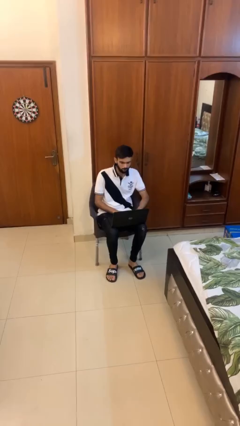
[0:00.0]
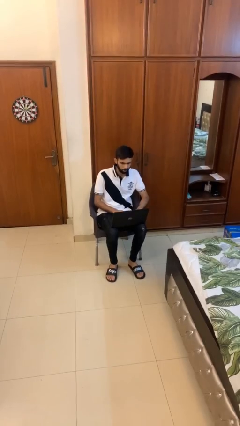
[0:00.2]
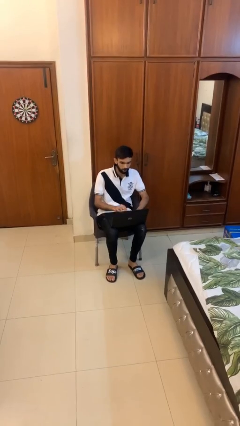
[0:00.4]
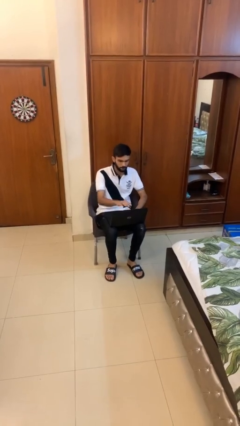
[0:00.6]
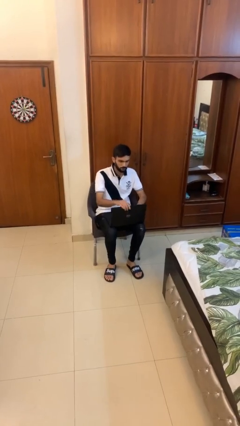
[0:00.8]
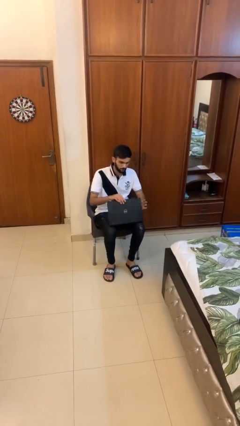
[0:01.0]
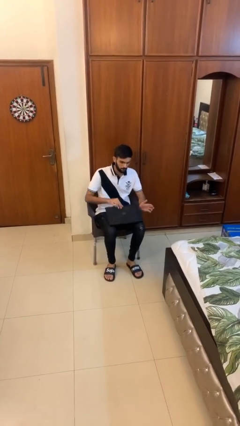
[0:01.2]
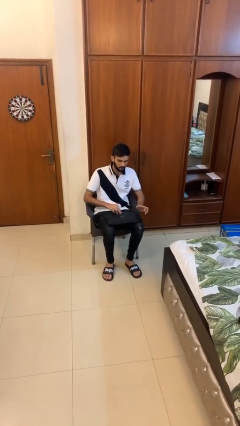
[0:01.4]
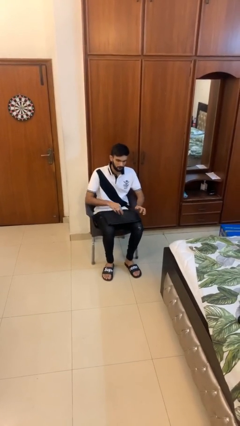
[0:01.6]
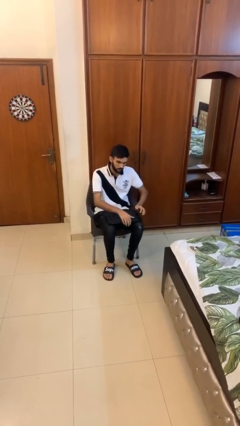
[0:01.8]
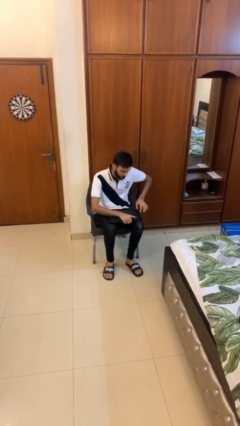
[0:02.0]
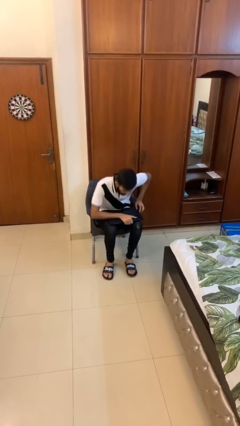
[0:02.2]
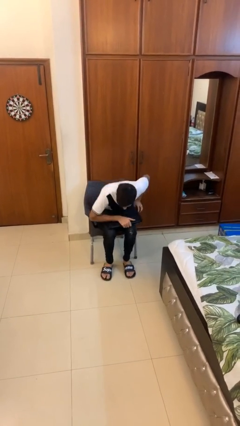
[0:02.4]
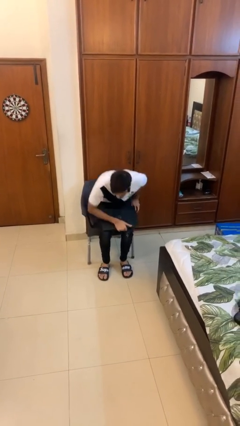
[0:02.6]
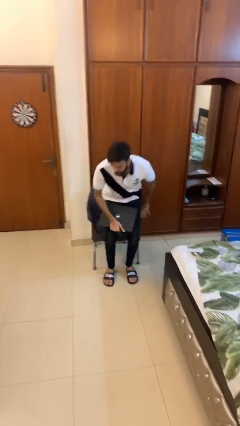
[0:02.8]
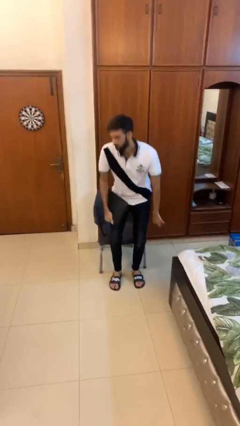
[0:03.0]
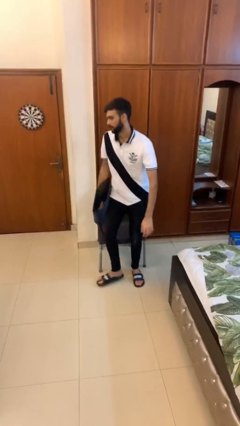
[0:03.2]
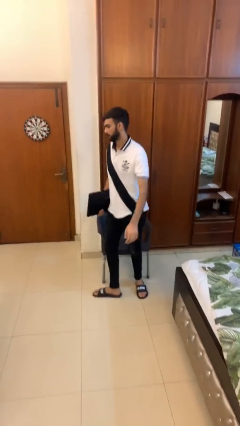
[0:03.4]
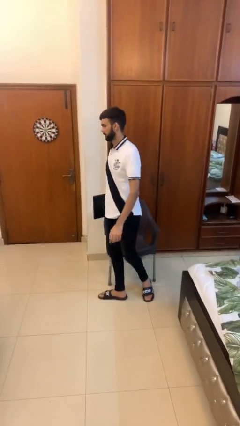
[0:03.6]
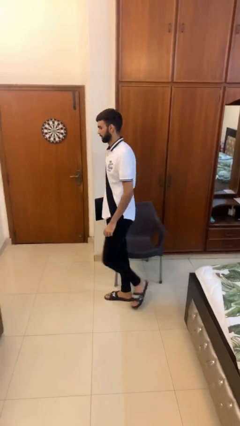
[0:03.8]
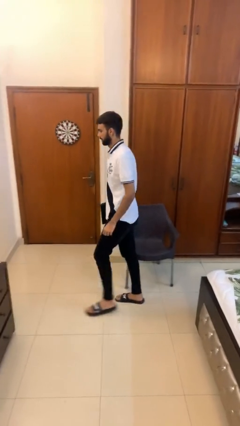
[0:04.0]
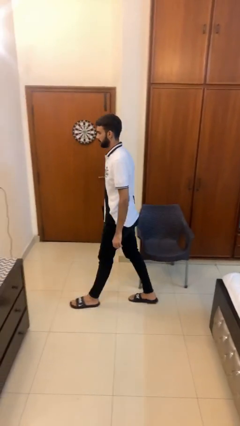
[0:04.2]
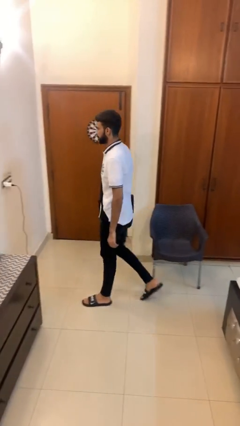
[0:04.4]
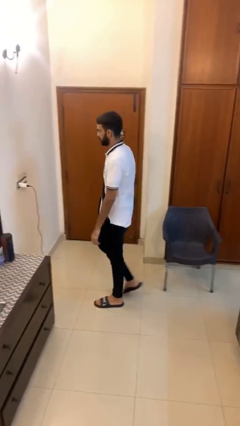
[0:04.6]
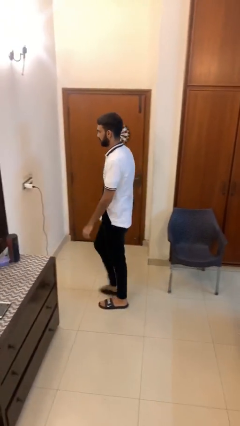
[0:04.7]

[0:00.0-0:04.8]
person stands up

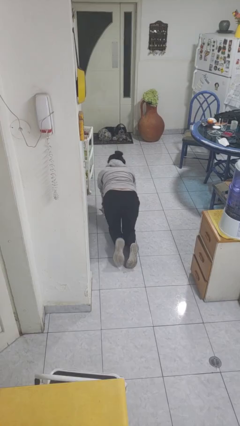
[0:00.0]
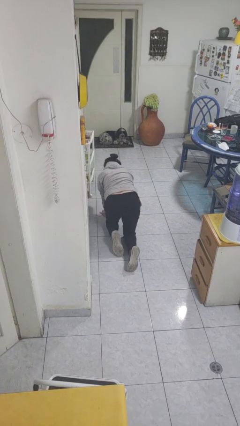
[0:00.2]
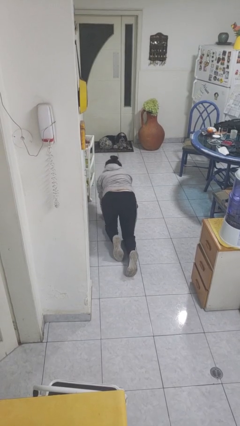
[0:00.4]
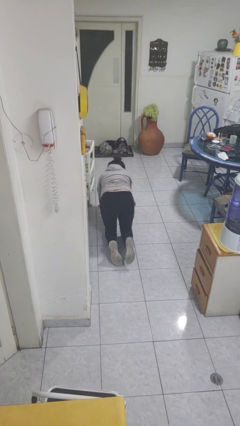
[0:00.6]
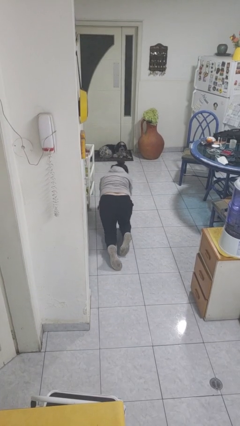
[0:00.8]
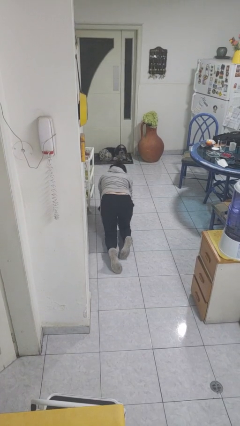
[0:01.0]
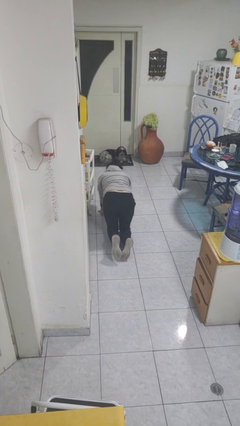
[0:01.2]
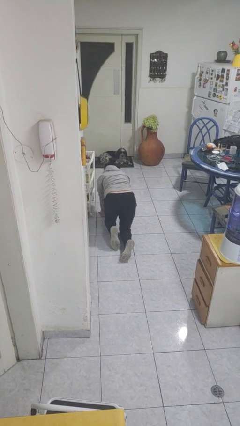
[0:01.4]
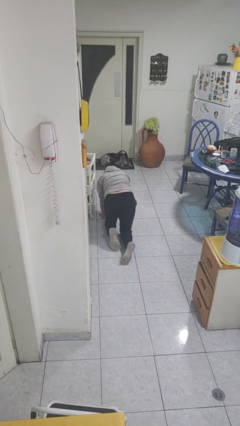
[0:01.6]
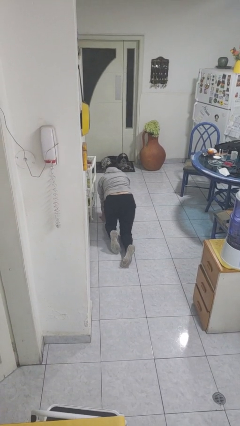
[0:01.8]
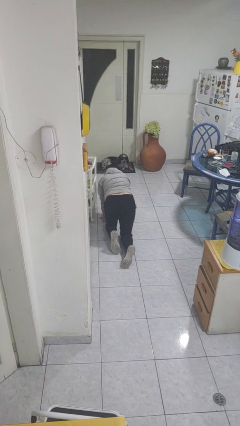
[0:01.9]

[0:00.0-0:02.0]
person crawls

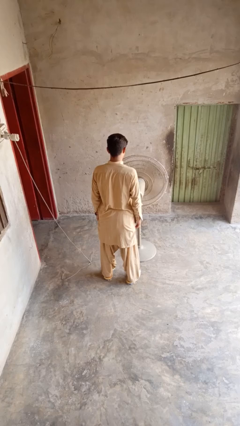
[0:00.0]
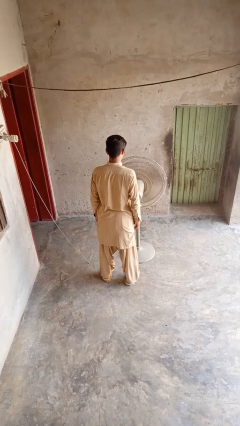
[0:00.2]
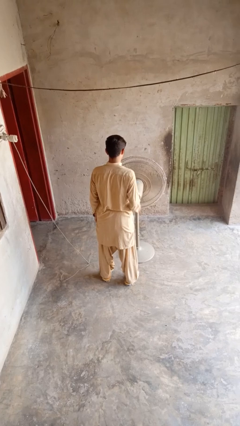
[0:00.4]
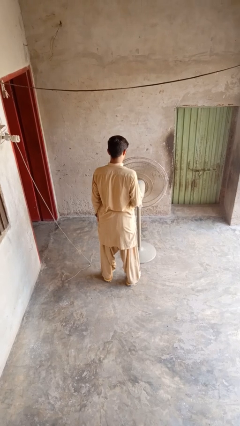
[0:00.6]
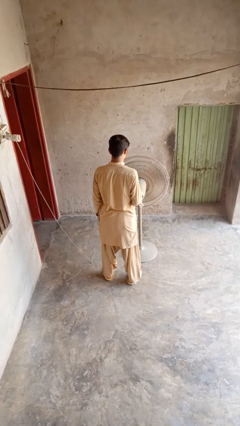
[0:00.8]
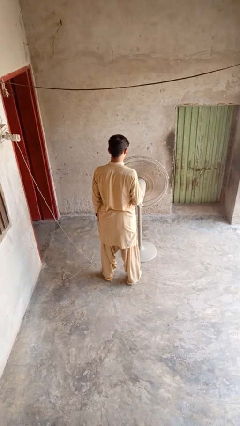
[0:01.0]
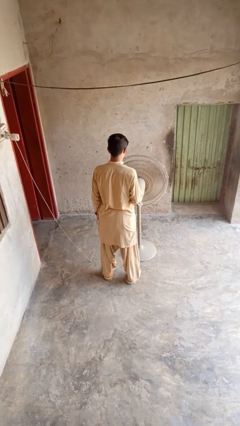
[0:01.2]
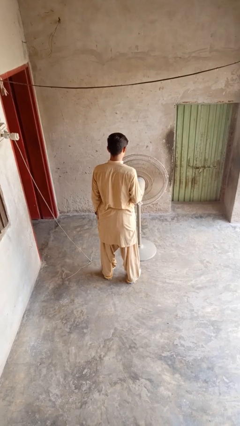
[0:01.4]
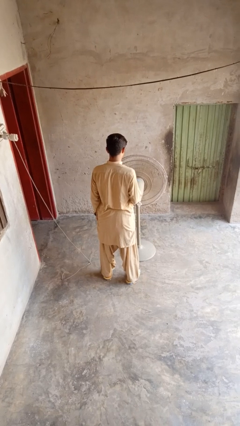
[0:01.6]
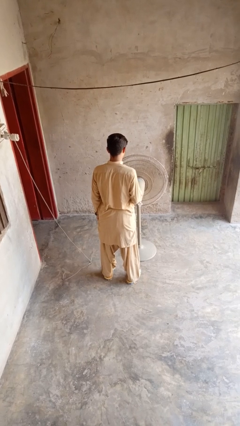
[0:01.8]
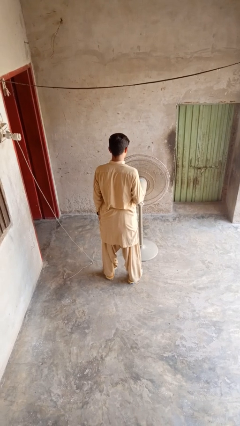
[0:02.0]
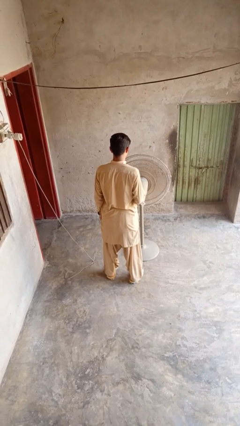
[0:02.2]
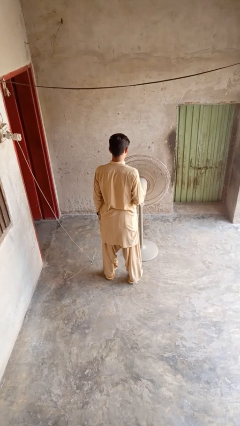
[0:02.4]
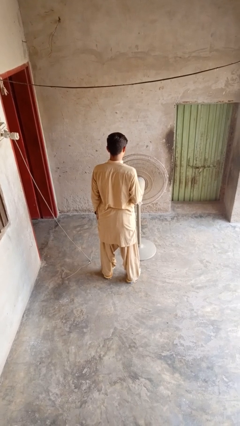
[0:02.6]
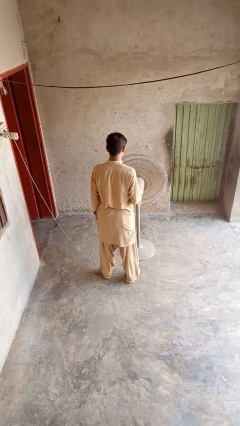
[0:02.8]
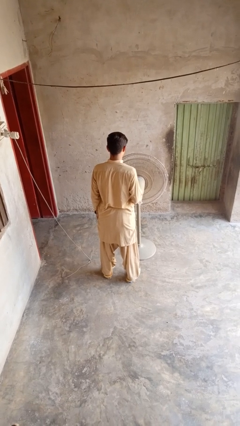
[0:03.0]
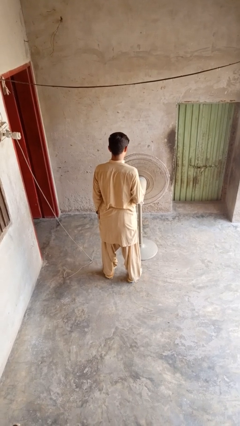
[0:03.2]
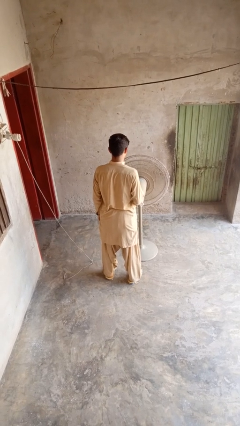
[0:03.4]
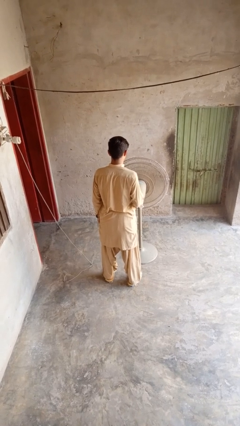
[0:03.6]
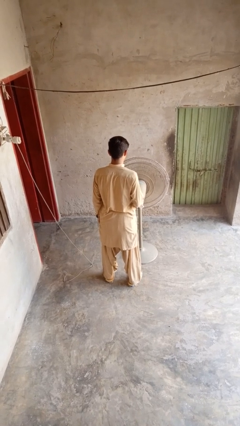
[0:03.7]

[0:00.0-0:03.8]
person turns on fan

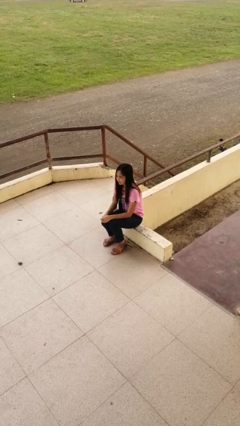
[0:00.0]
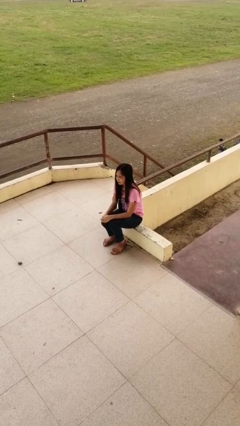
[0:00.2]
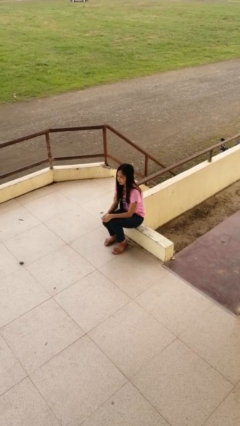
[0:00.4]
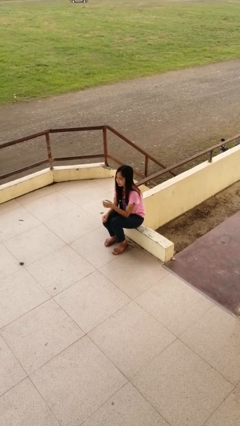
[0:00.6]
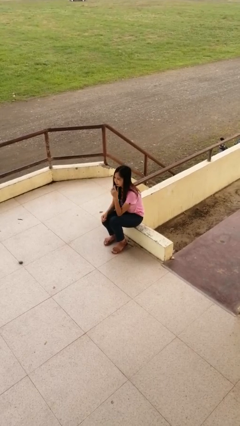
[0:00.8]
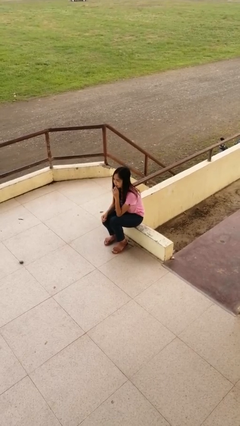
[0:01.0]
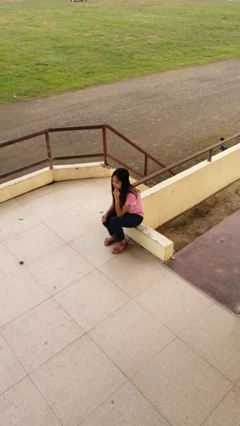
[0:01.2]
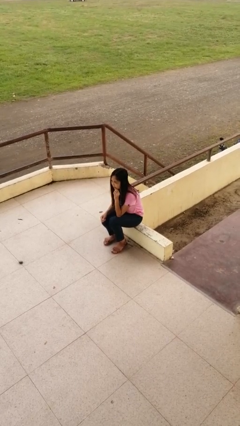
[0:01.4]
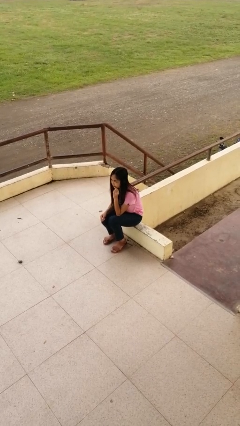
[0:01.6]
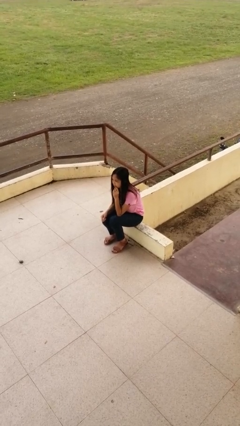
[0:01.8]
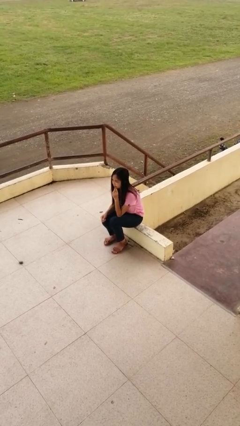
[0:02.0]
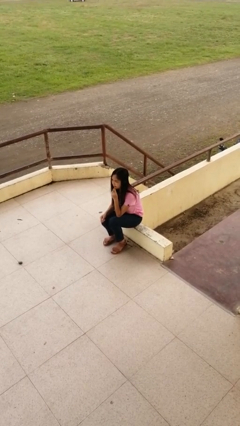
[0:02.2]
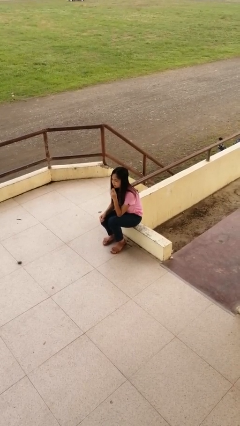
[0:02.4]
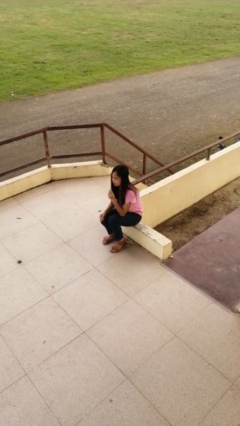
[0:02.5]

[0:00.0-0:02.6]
person strokes chin

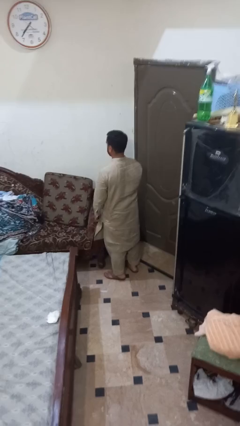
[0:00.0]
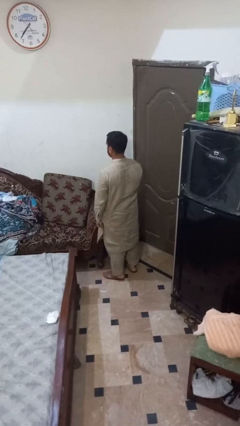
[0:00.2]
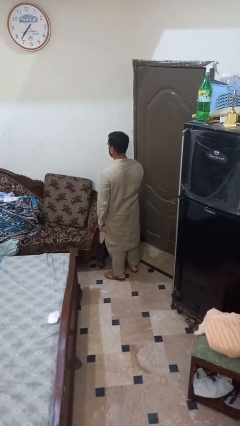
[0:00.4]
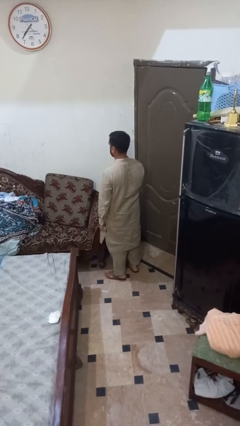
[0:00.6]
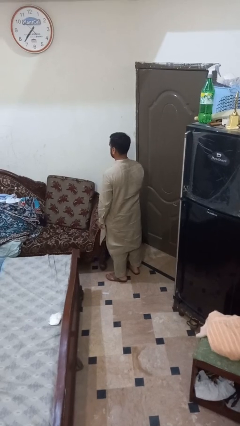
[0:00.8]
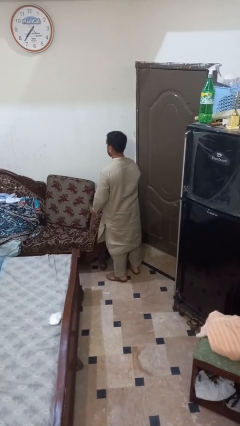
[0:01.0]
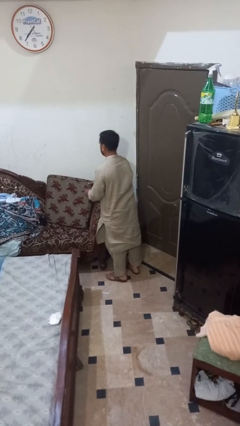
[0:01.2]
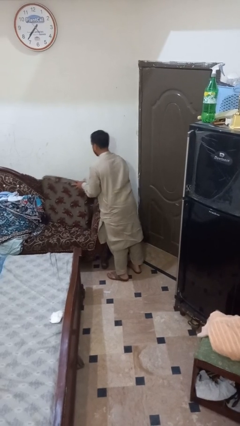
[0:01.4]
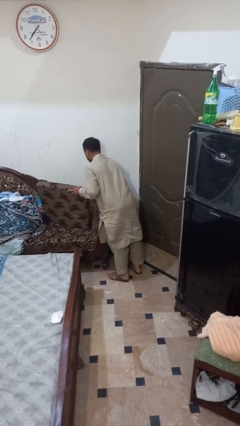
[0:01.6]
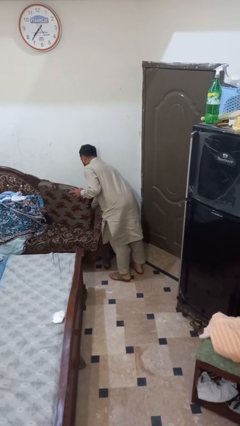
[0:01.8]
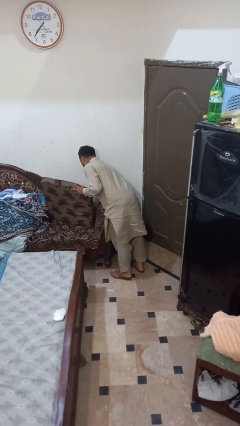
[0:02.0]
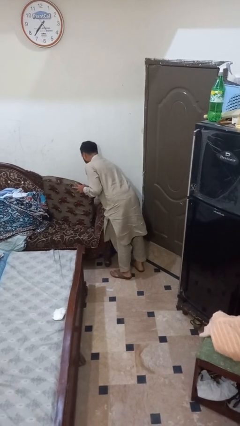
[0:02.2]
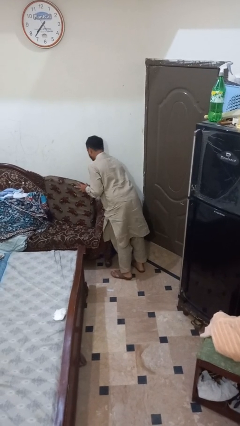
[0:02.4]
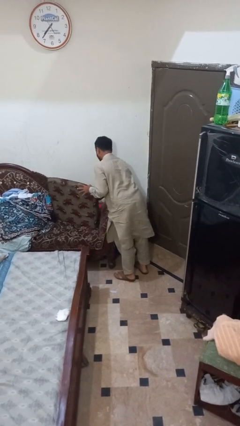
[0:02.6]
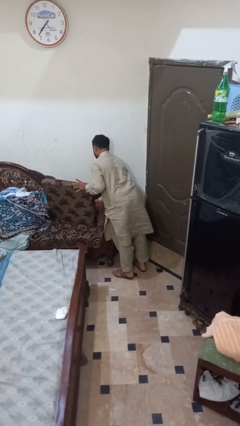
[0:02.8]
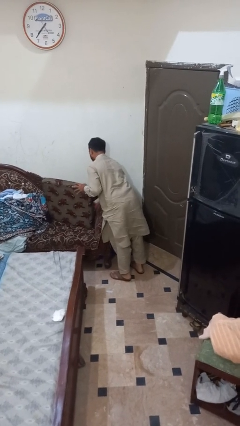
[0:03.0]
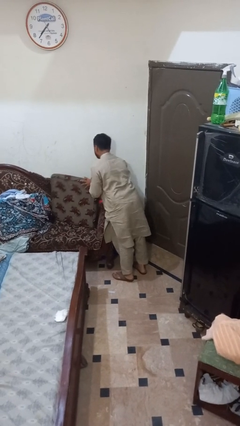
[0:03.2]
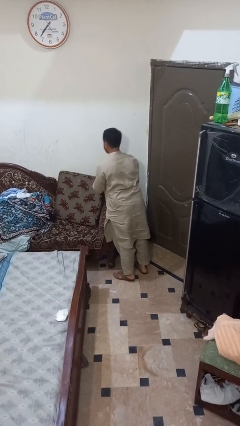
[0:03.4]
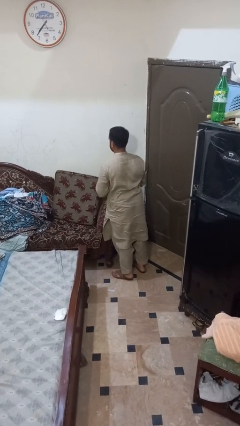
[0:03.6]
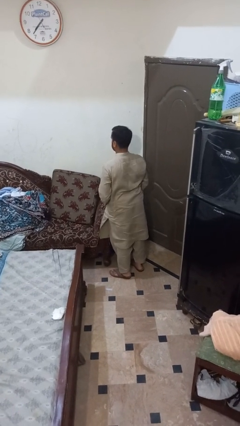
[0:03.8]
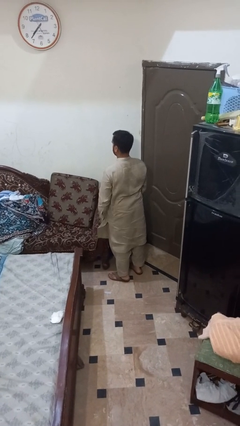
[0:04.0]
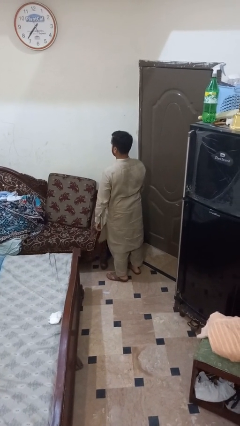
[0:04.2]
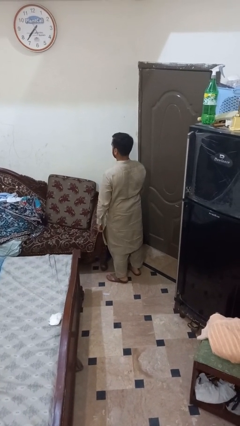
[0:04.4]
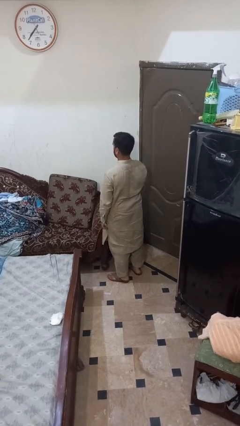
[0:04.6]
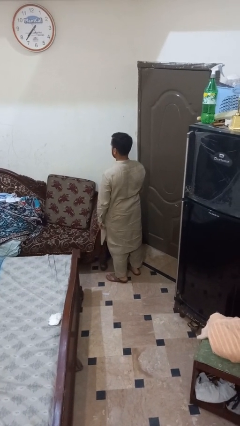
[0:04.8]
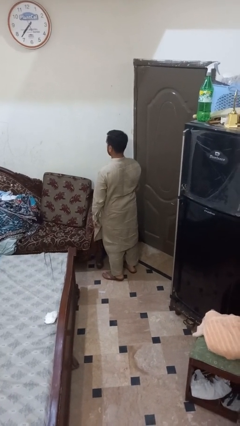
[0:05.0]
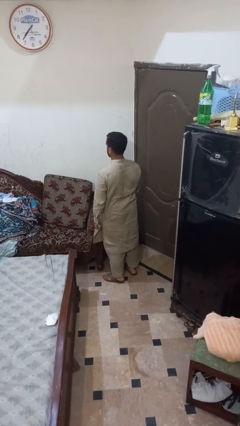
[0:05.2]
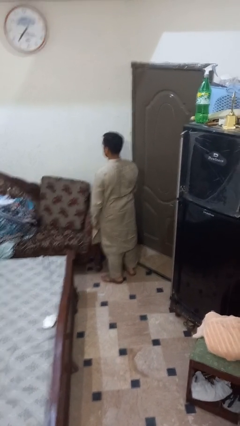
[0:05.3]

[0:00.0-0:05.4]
person searches in couch
